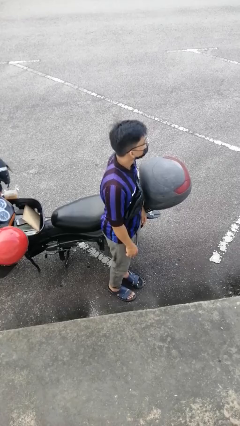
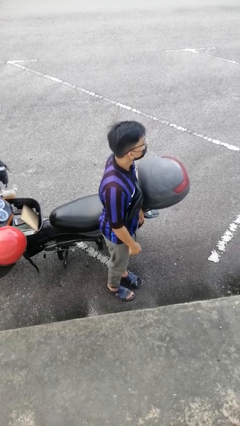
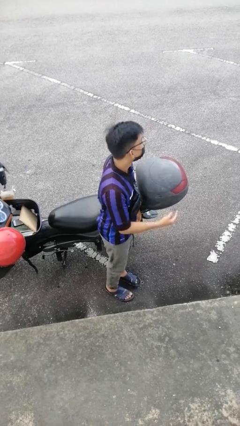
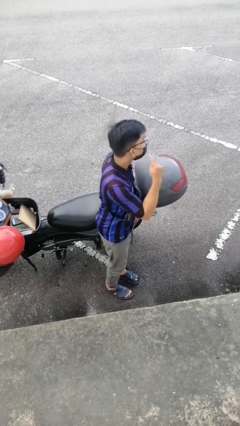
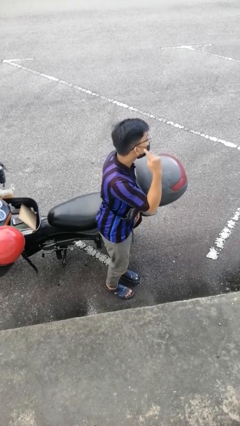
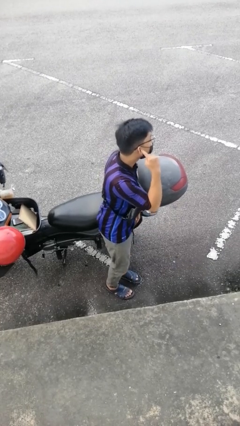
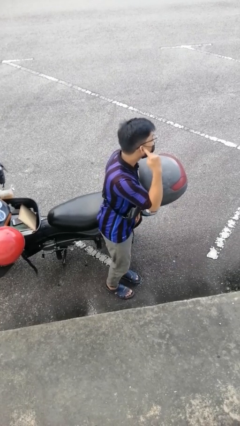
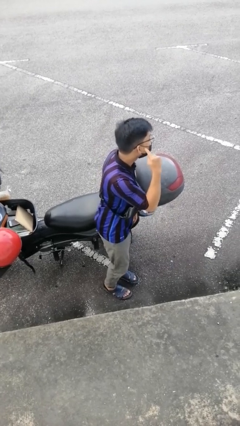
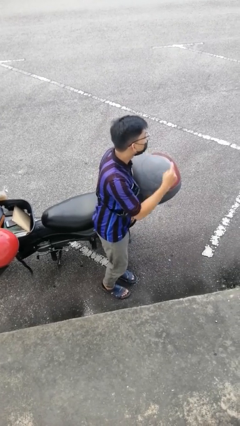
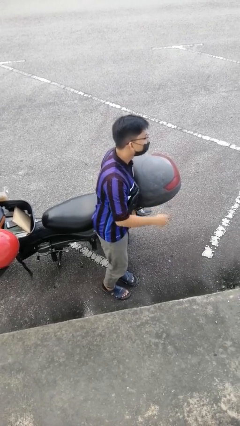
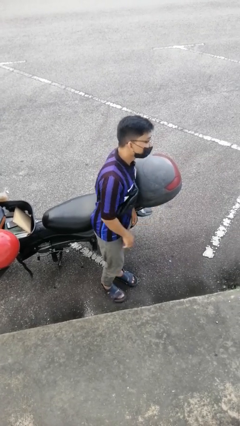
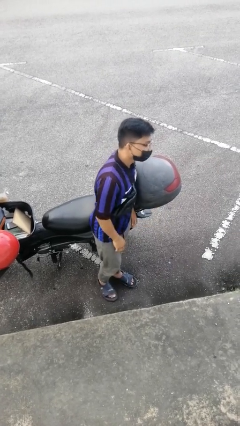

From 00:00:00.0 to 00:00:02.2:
person gestures listen closely

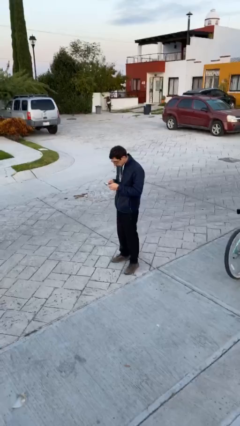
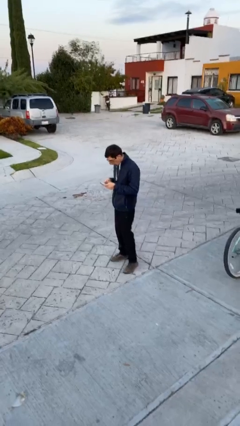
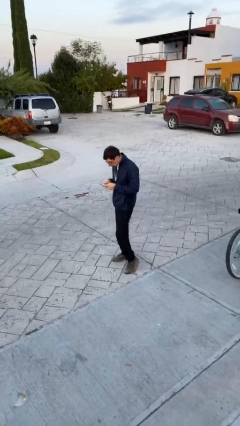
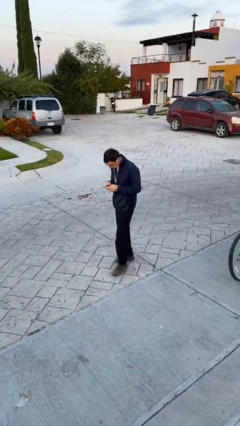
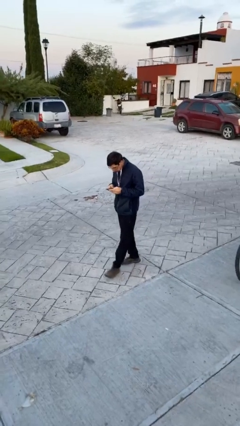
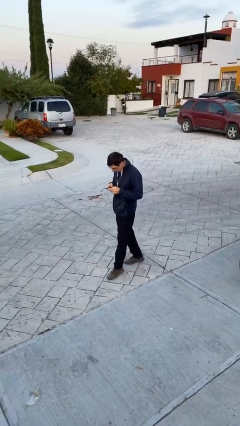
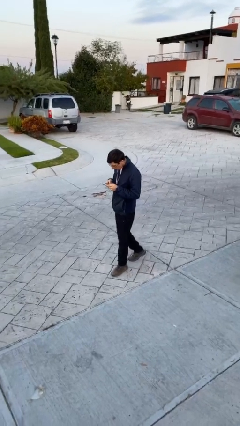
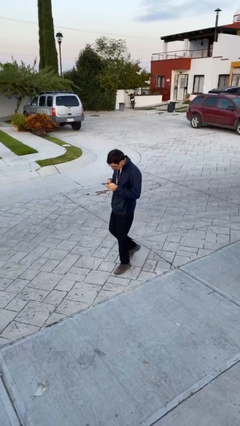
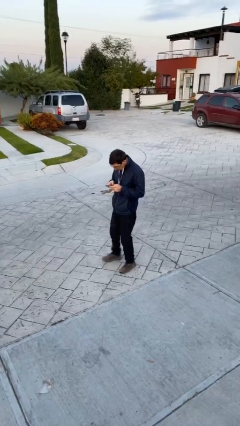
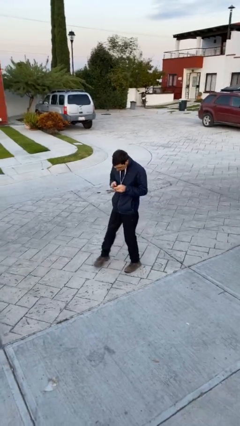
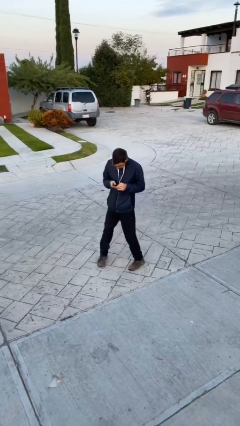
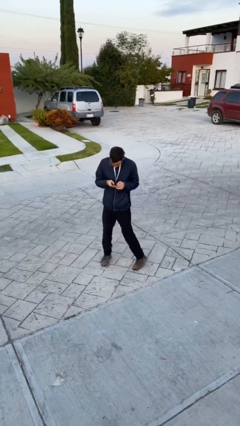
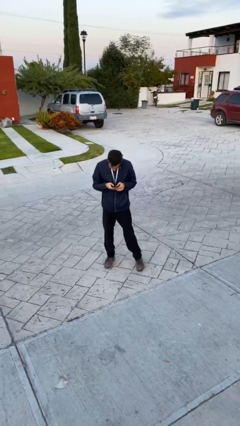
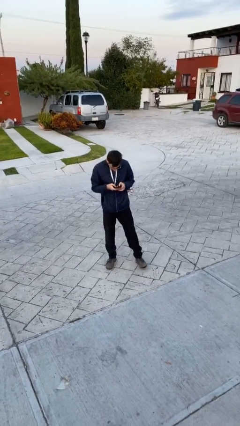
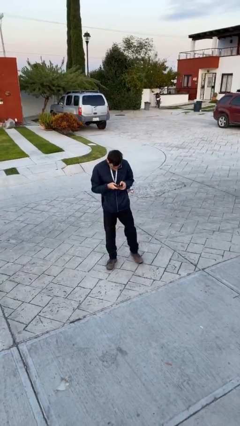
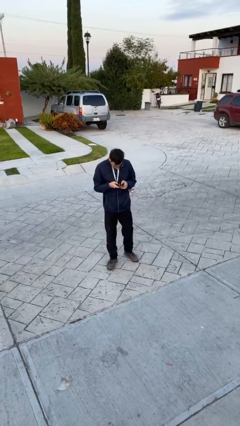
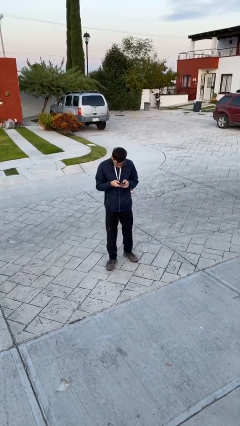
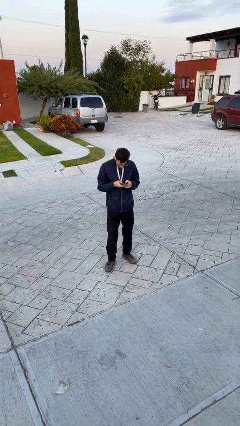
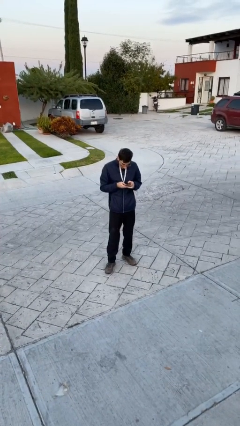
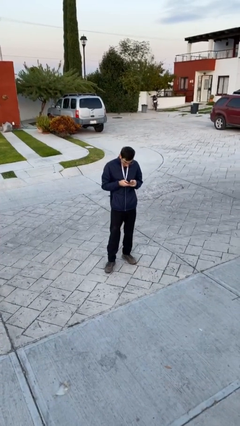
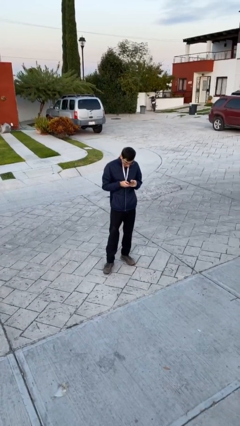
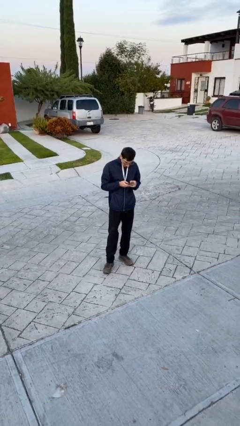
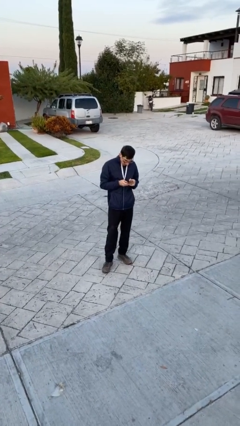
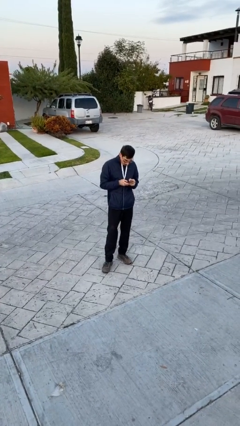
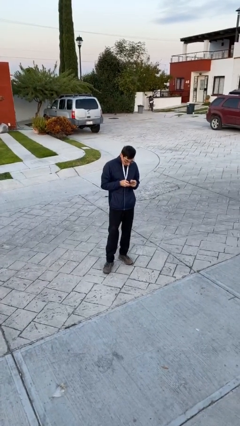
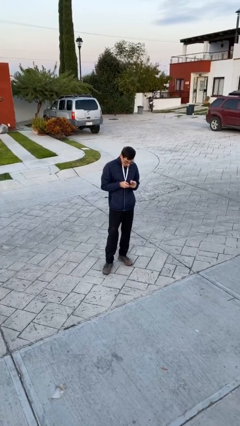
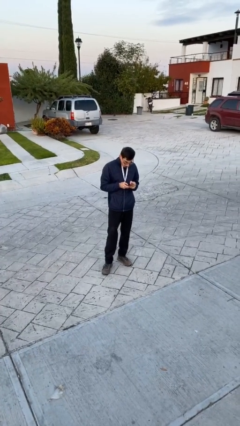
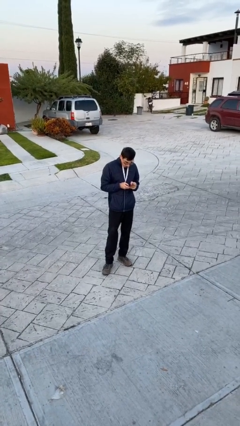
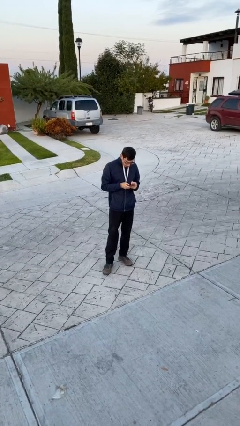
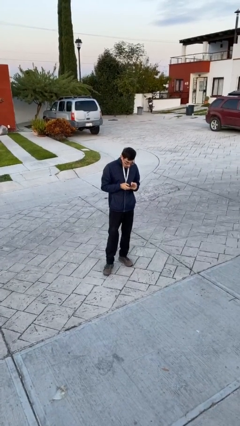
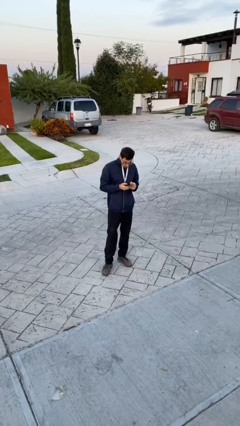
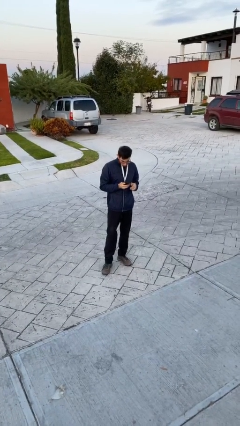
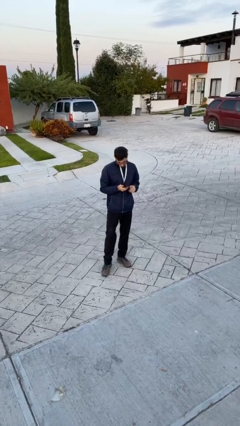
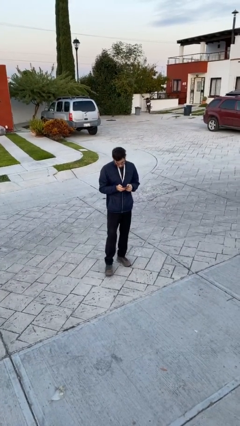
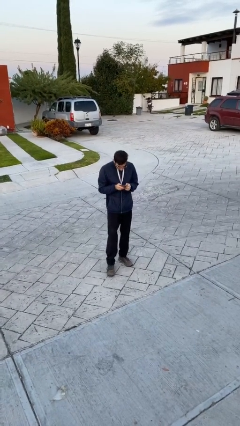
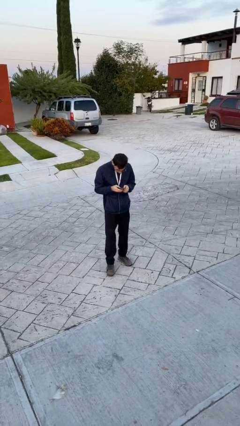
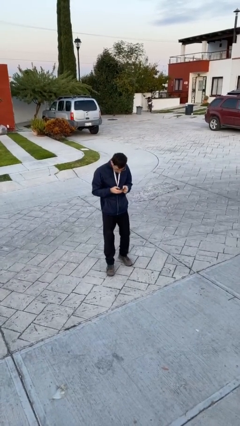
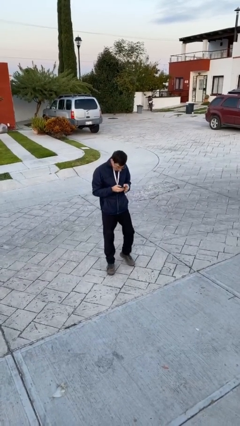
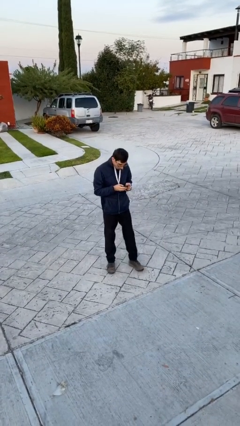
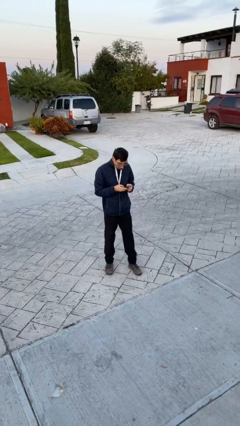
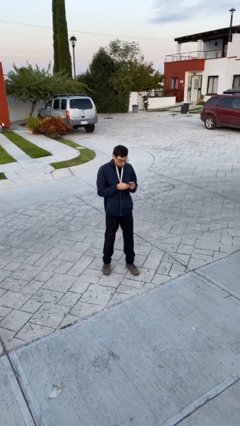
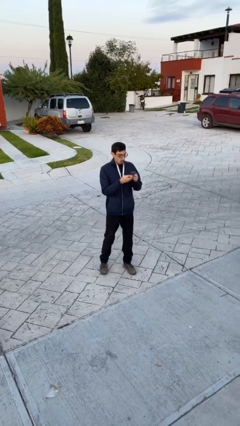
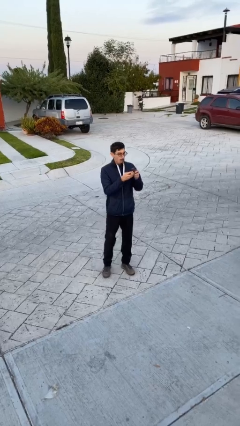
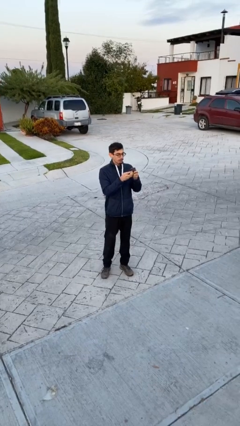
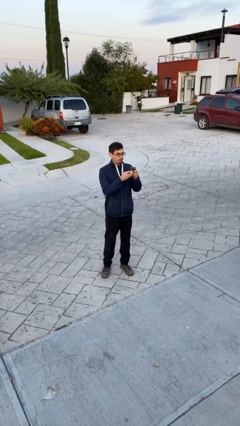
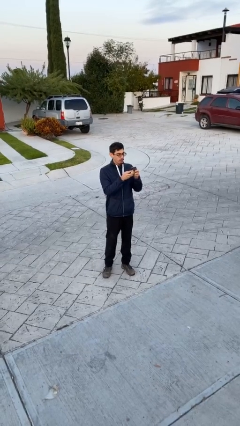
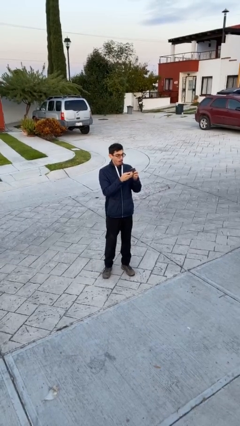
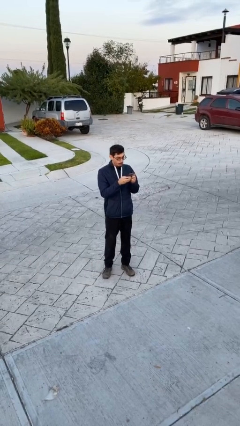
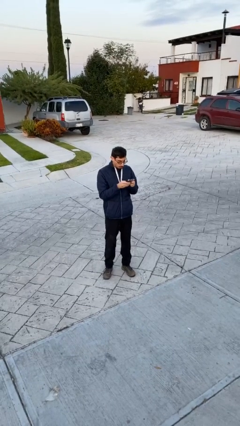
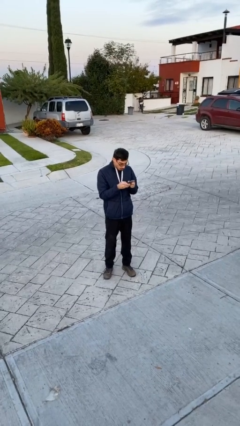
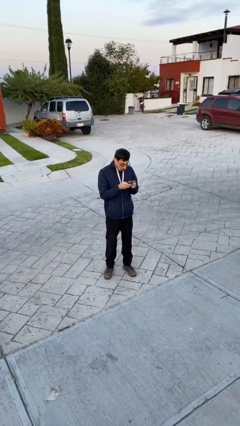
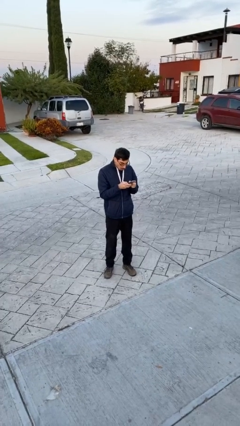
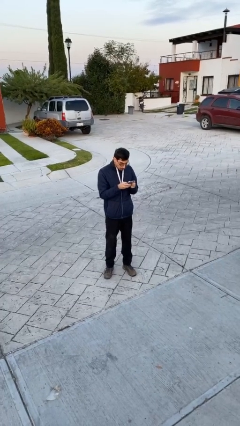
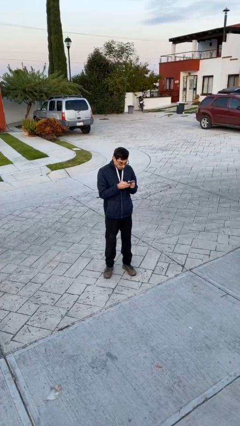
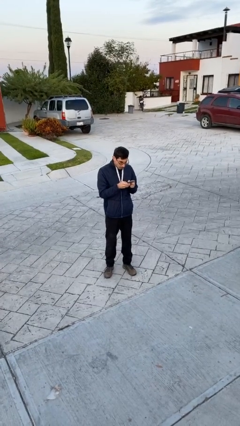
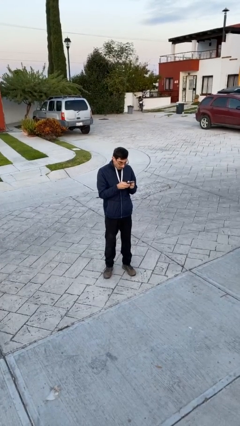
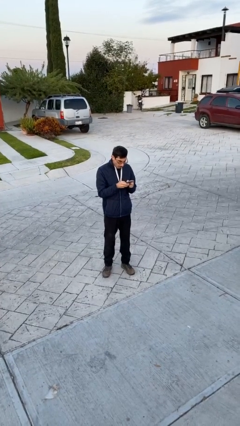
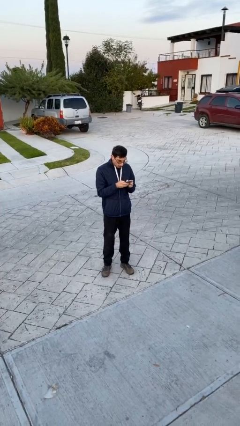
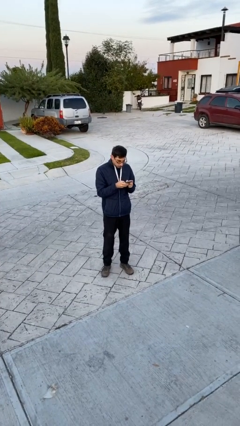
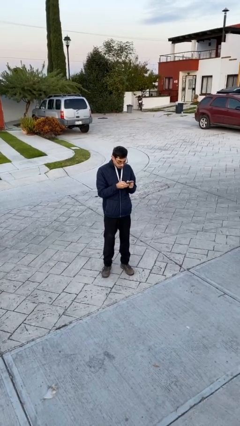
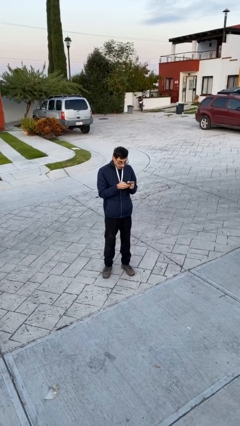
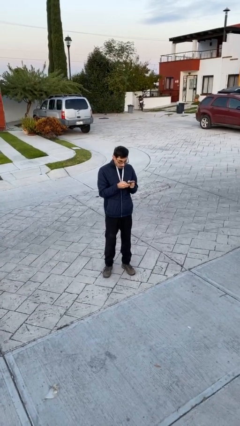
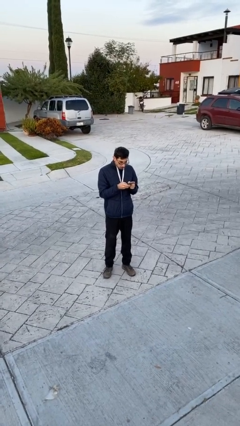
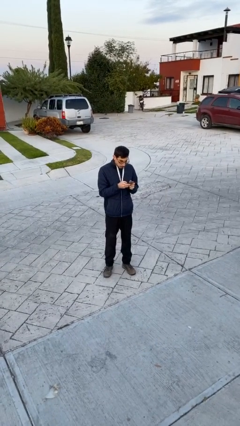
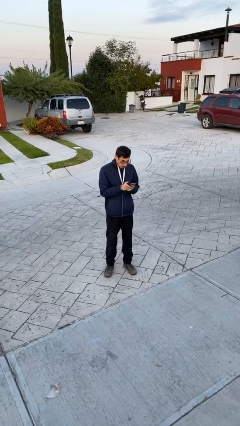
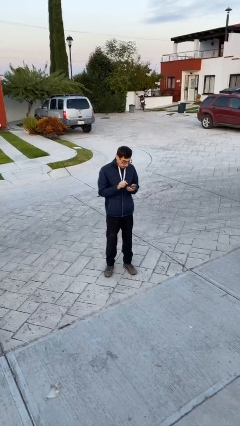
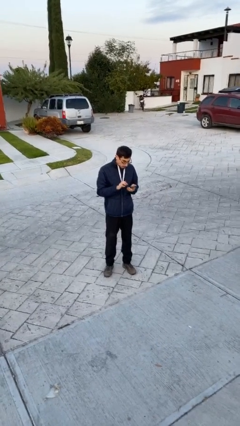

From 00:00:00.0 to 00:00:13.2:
person texts on phone

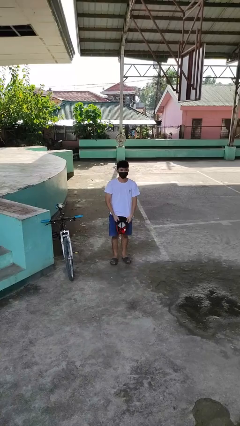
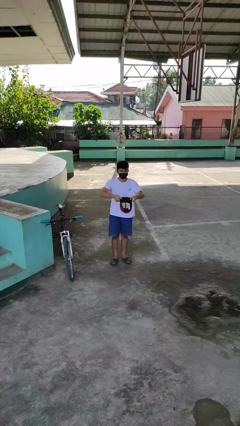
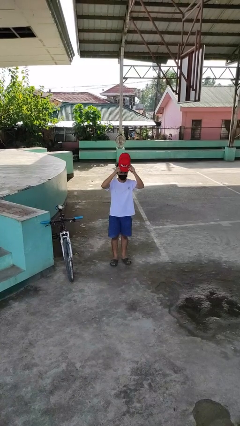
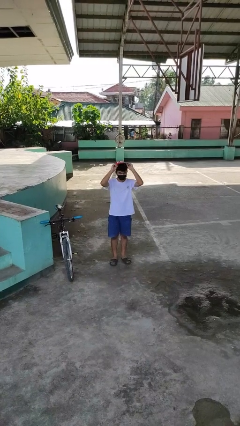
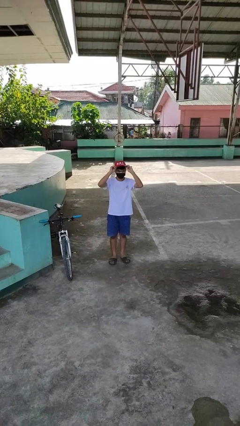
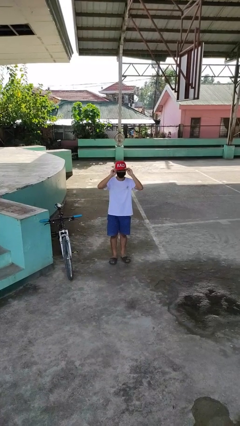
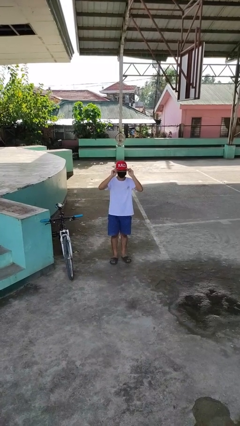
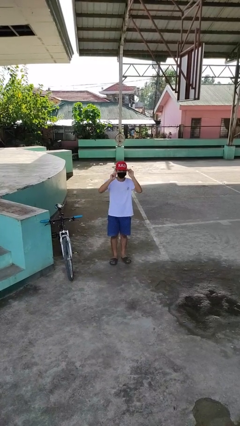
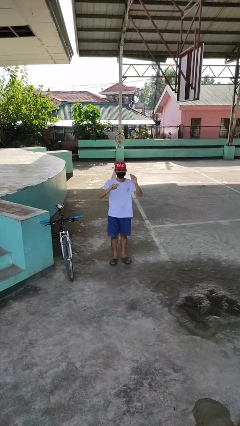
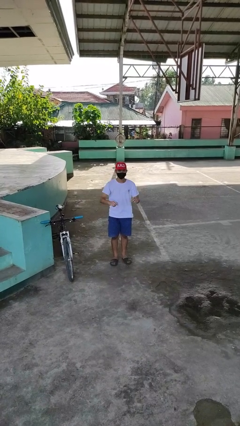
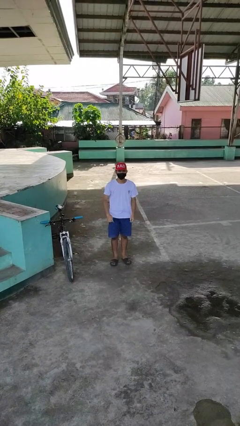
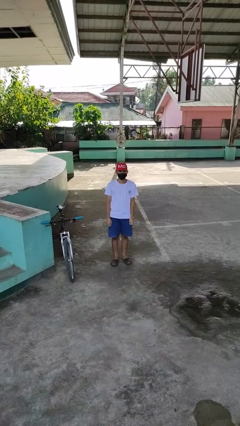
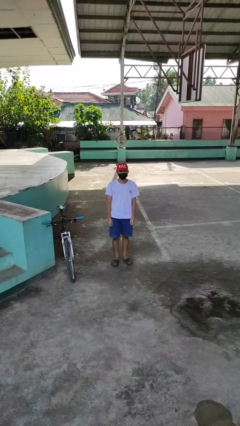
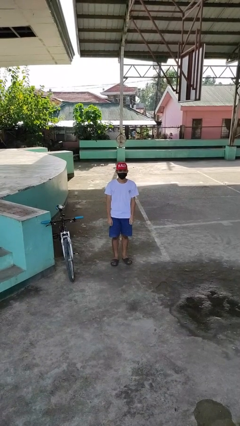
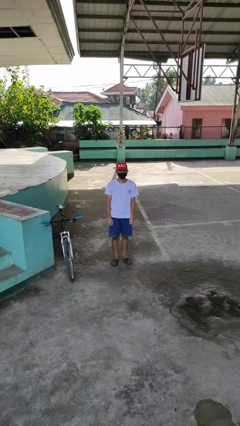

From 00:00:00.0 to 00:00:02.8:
person puts on hat
